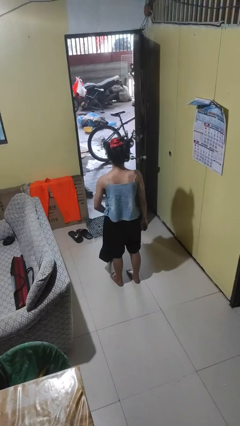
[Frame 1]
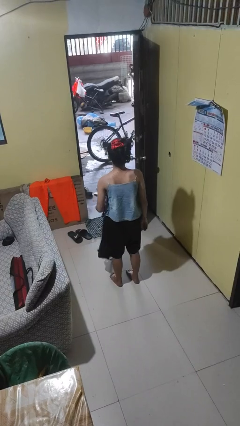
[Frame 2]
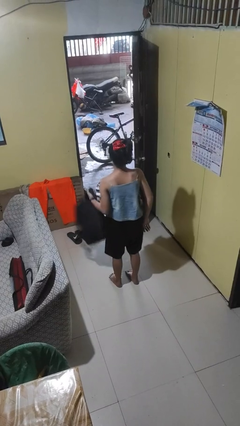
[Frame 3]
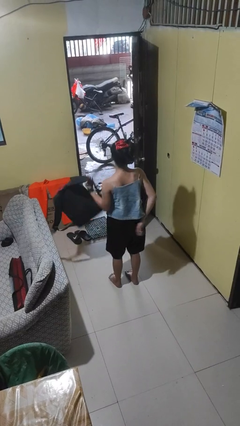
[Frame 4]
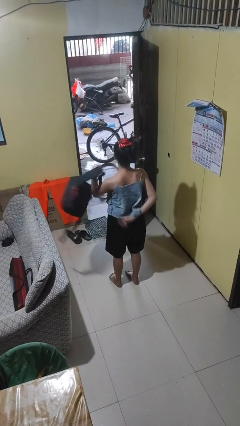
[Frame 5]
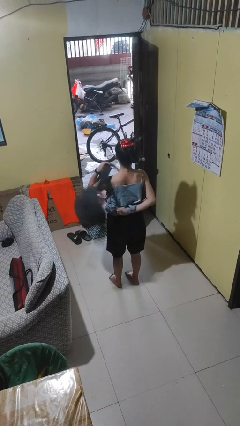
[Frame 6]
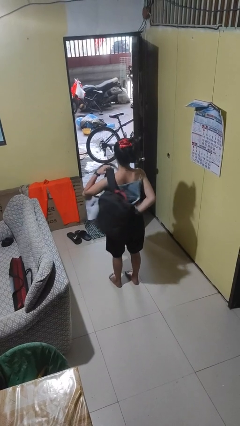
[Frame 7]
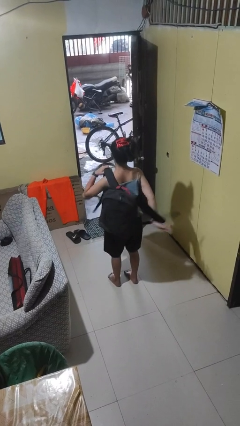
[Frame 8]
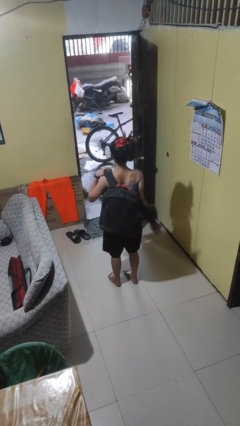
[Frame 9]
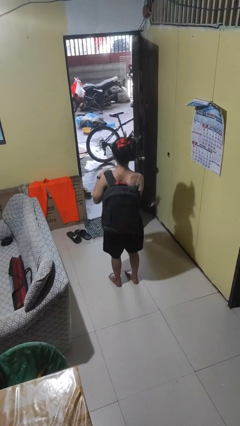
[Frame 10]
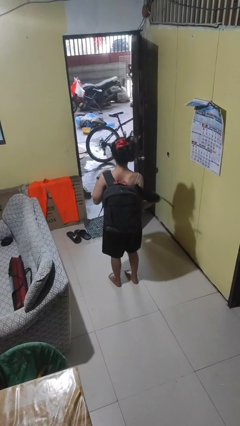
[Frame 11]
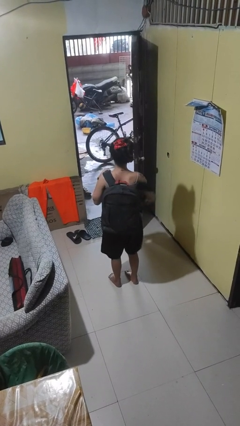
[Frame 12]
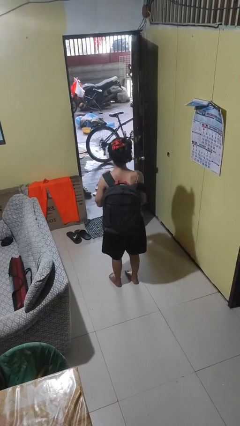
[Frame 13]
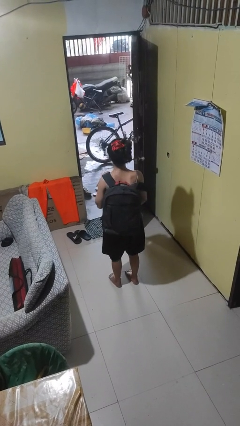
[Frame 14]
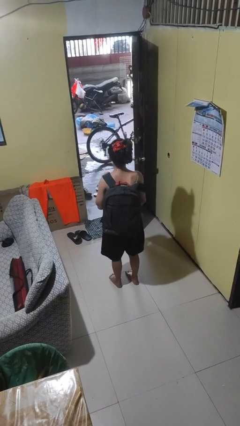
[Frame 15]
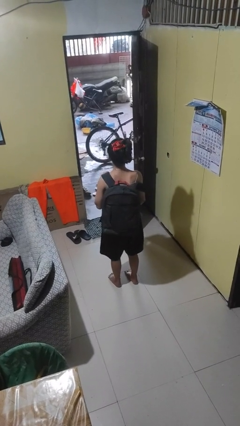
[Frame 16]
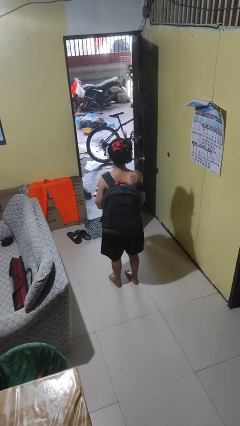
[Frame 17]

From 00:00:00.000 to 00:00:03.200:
person puts on backpack

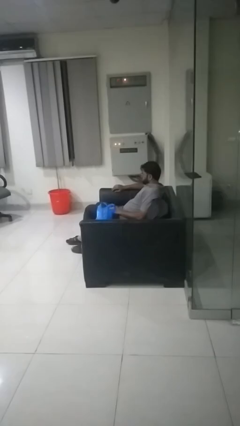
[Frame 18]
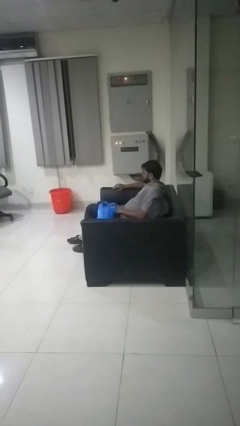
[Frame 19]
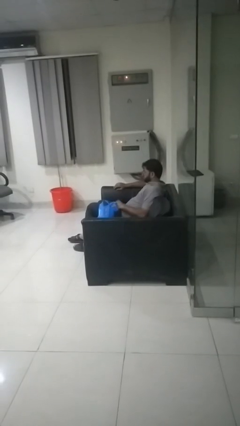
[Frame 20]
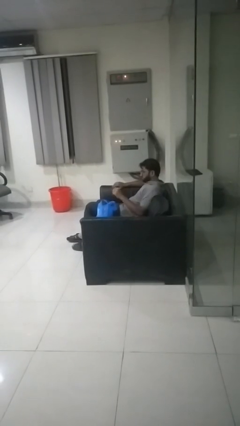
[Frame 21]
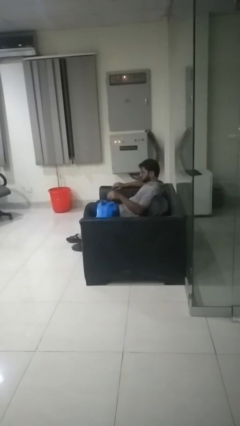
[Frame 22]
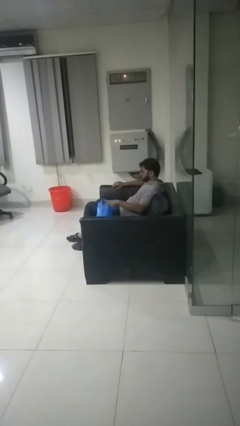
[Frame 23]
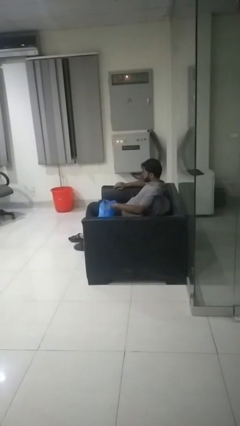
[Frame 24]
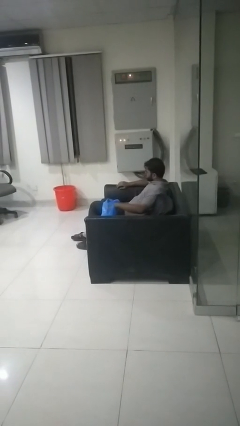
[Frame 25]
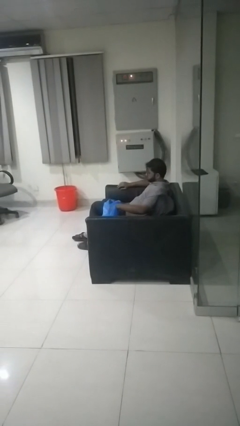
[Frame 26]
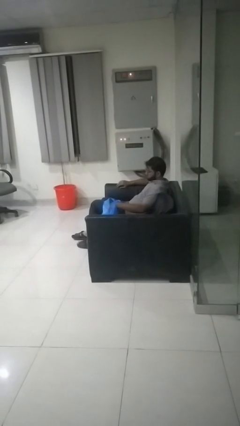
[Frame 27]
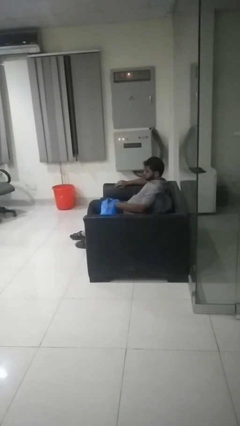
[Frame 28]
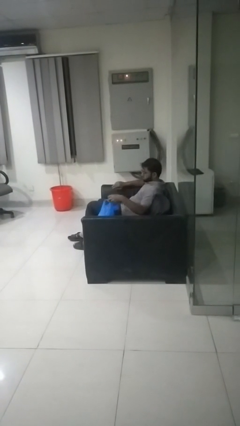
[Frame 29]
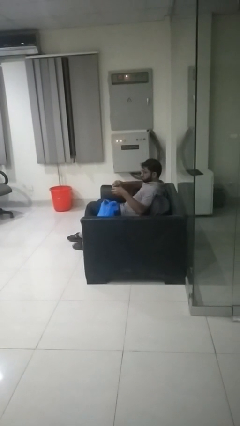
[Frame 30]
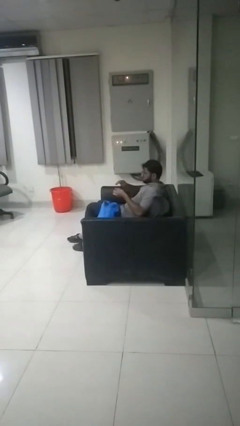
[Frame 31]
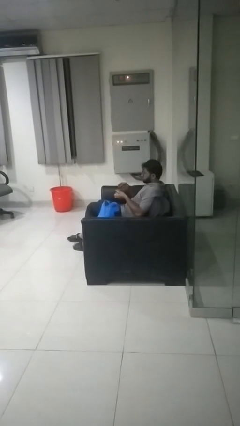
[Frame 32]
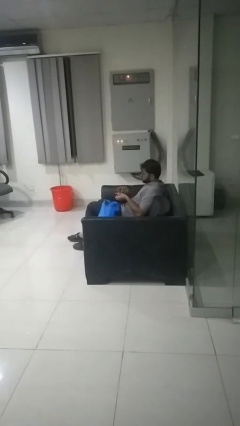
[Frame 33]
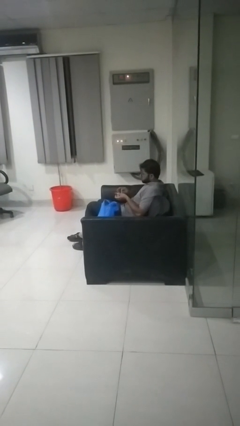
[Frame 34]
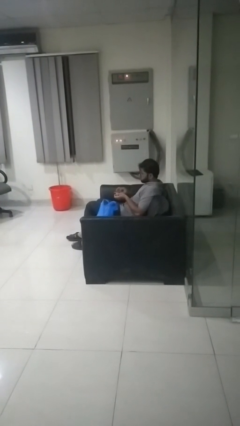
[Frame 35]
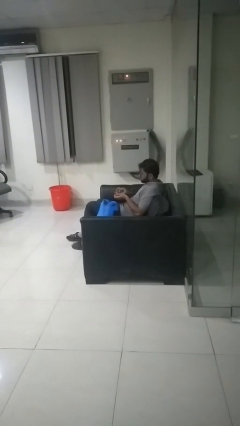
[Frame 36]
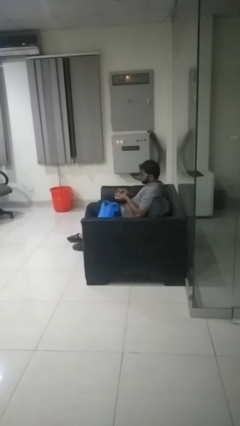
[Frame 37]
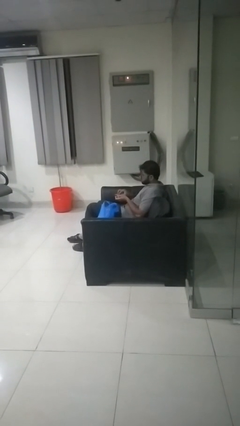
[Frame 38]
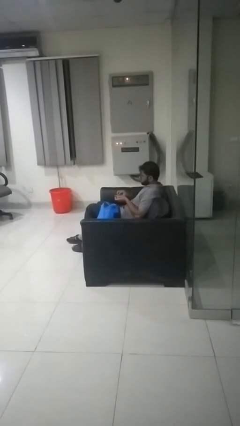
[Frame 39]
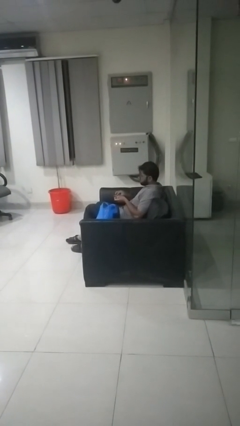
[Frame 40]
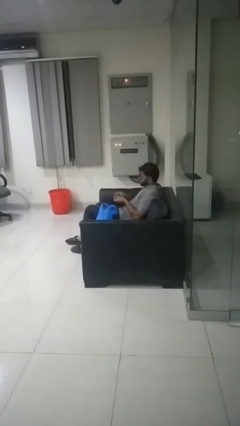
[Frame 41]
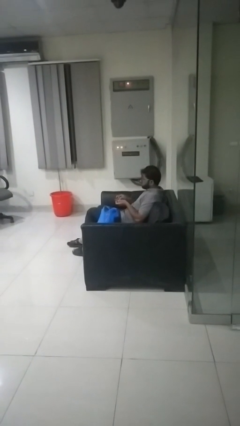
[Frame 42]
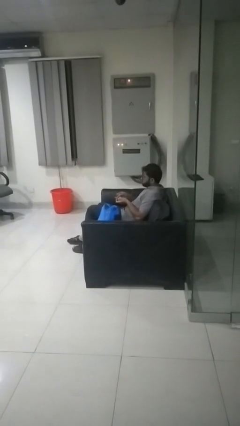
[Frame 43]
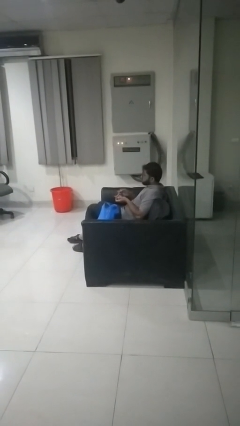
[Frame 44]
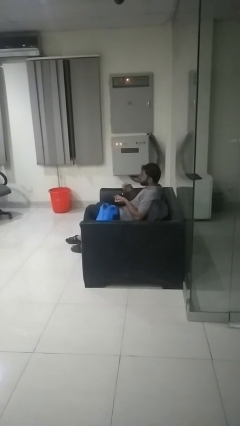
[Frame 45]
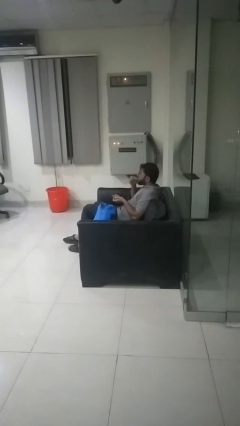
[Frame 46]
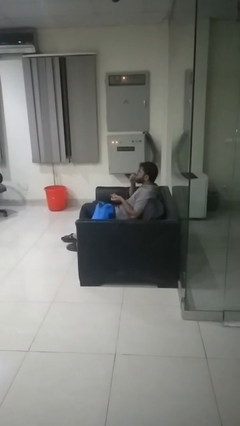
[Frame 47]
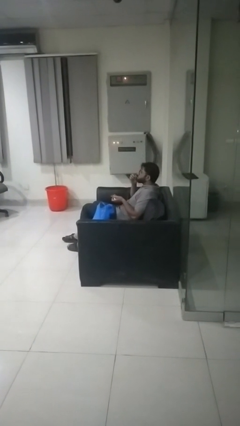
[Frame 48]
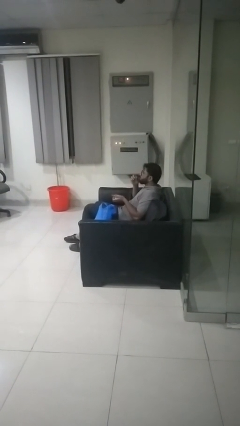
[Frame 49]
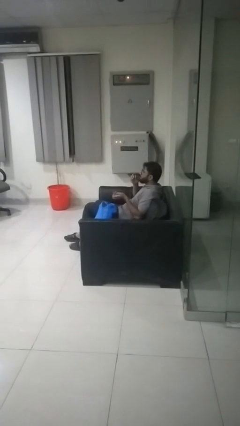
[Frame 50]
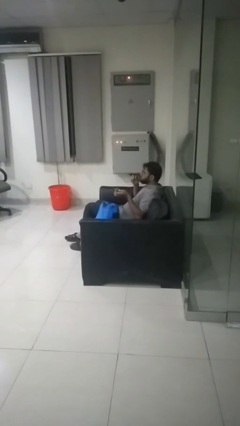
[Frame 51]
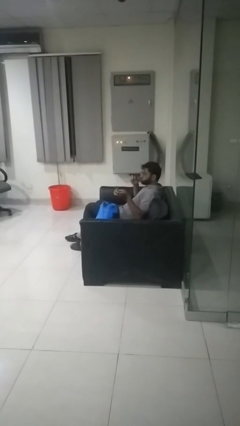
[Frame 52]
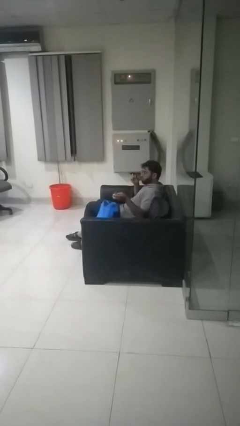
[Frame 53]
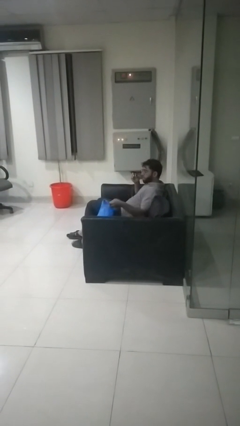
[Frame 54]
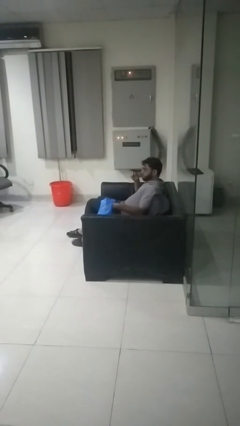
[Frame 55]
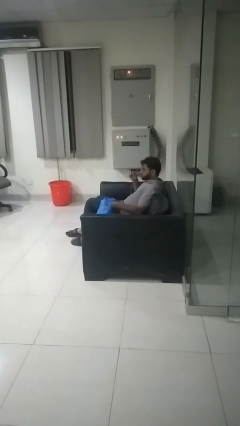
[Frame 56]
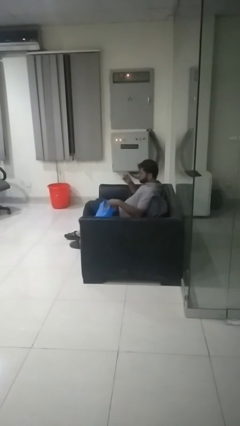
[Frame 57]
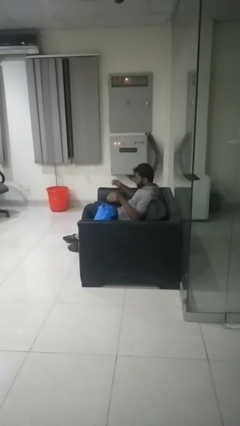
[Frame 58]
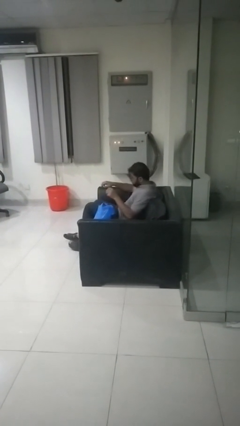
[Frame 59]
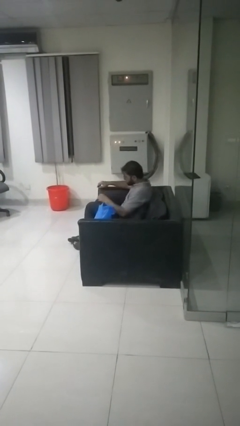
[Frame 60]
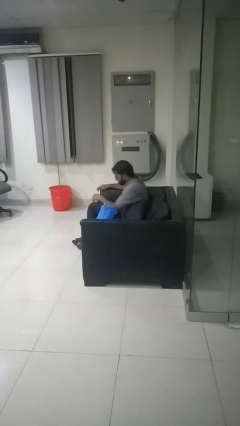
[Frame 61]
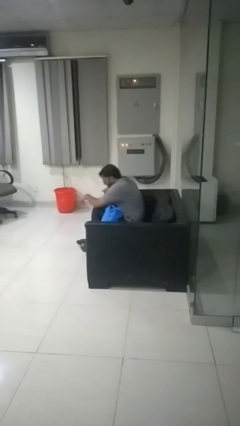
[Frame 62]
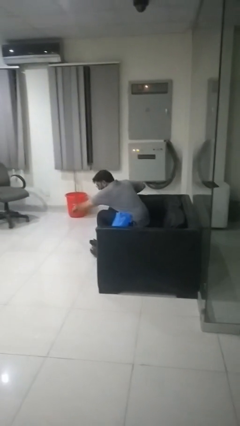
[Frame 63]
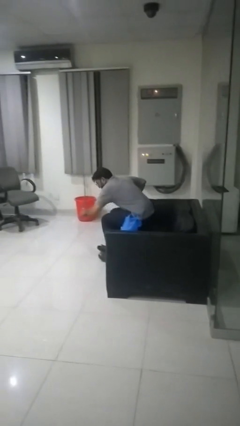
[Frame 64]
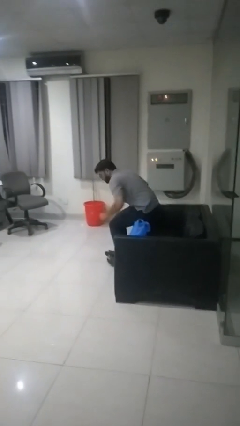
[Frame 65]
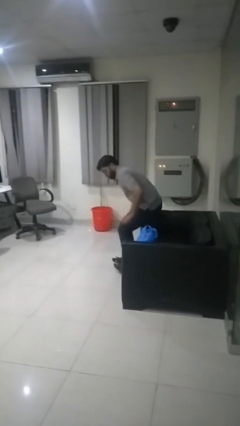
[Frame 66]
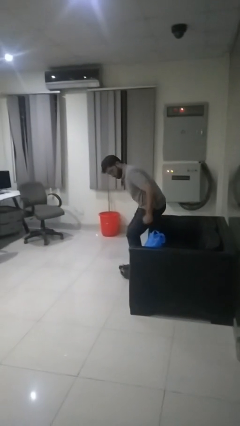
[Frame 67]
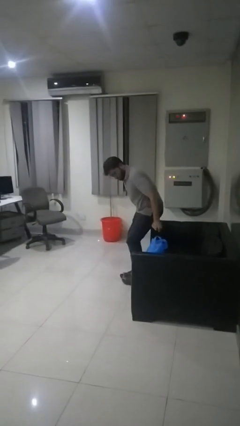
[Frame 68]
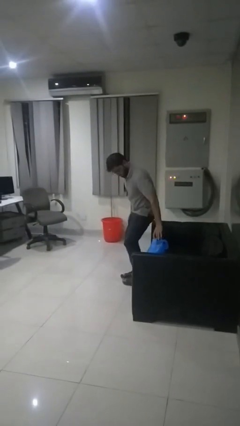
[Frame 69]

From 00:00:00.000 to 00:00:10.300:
person eats snack from bag

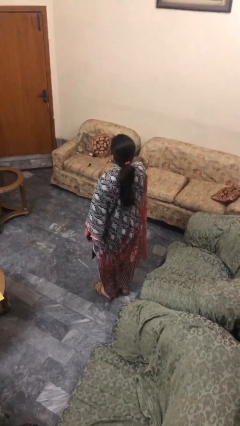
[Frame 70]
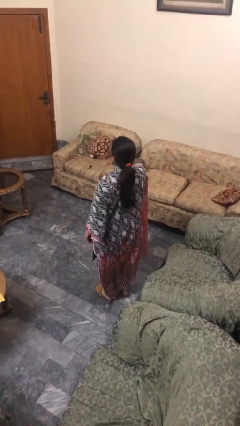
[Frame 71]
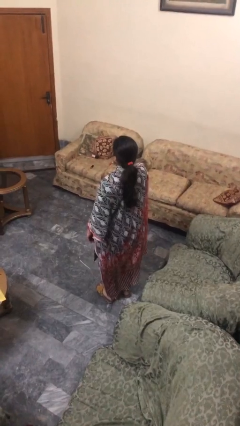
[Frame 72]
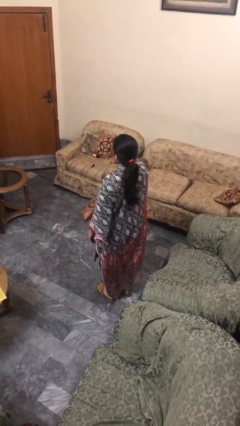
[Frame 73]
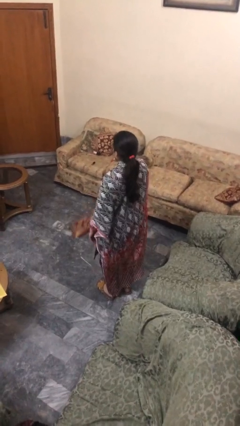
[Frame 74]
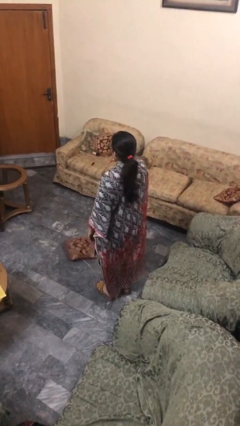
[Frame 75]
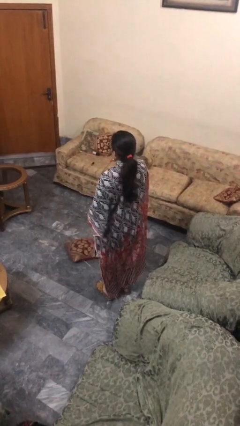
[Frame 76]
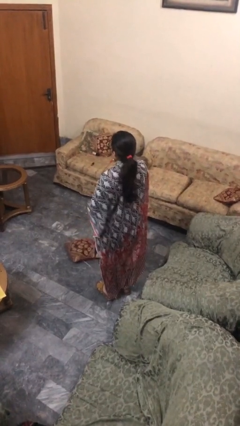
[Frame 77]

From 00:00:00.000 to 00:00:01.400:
person throws object to ground

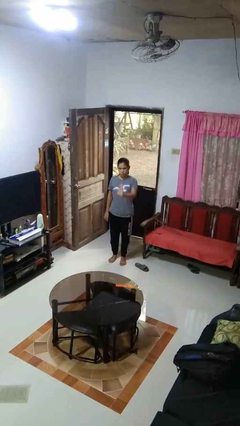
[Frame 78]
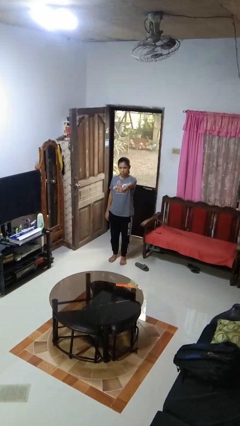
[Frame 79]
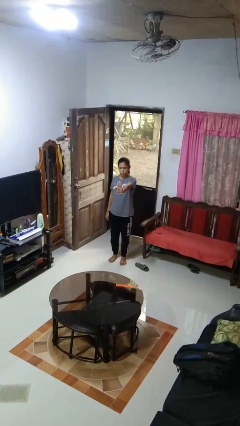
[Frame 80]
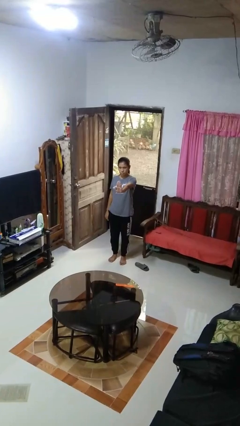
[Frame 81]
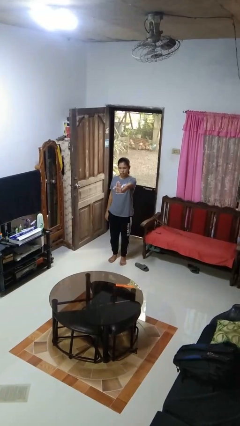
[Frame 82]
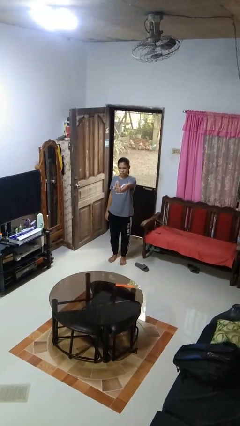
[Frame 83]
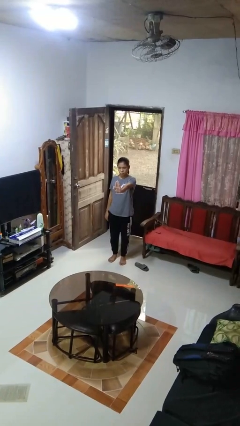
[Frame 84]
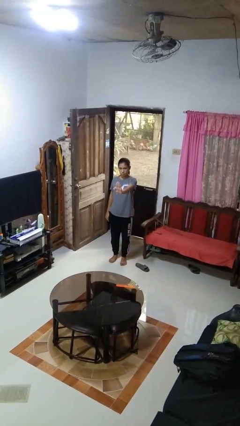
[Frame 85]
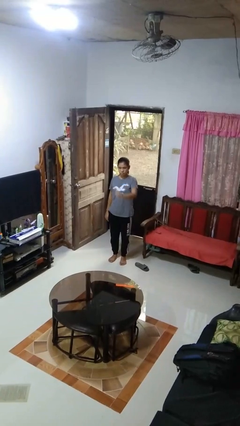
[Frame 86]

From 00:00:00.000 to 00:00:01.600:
person gestures stop

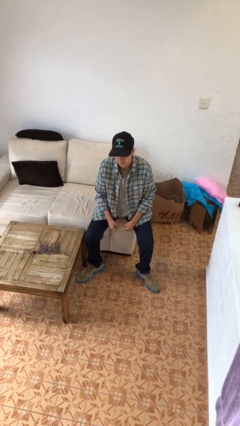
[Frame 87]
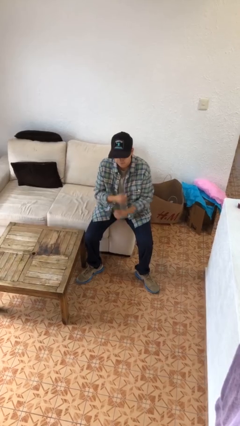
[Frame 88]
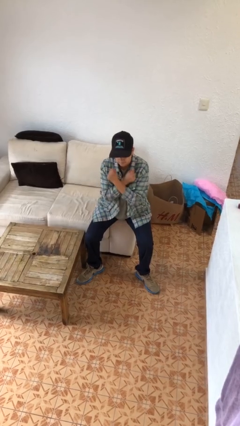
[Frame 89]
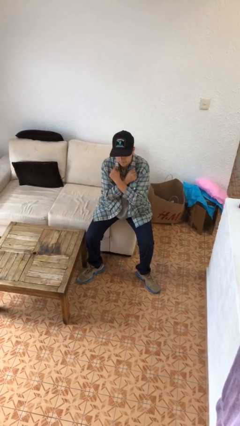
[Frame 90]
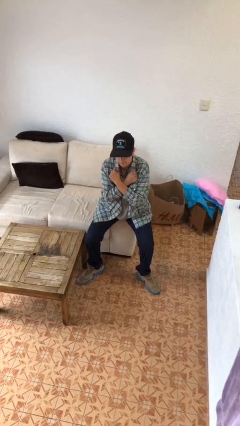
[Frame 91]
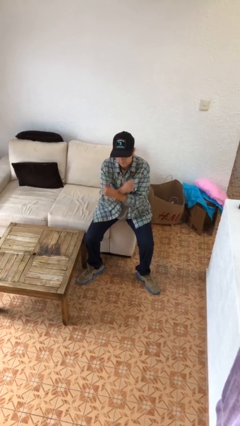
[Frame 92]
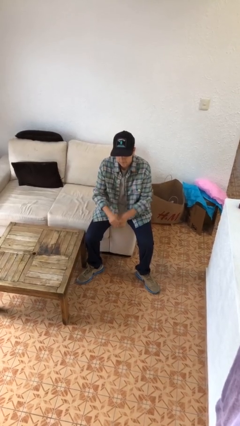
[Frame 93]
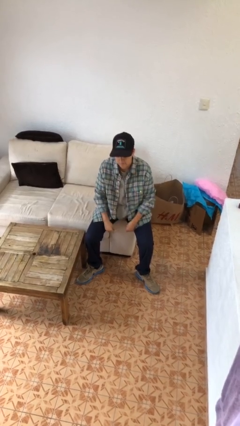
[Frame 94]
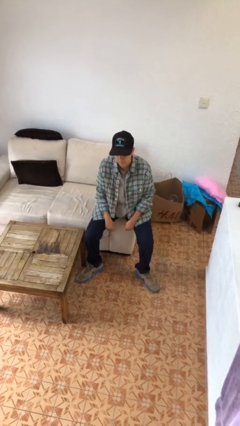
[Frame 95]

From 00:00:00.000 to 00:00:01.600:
person gestures arms x
